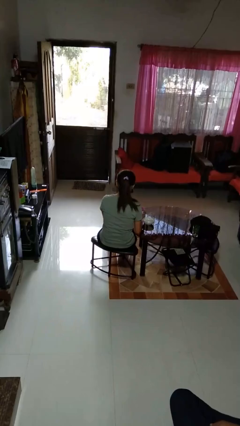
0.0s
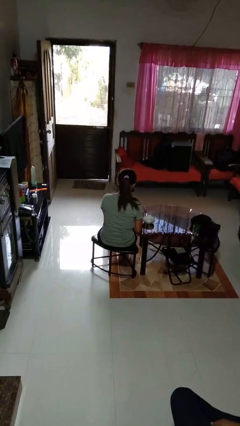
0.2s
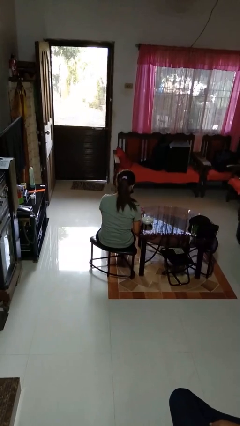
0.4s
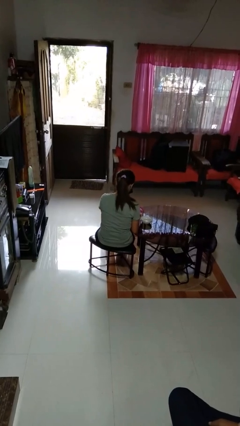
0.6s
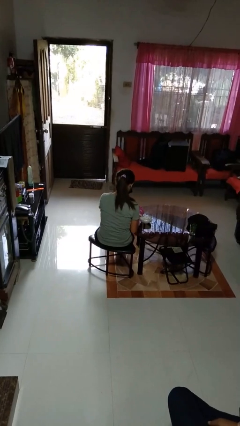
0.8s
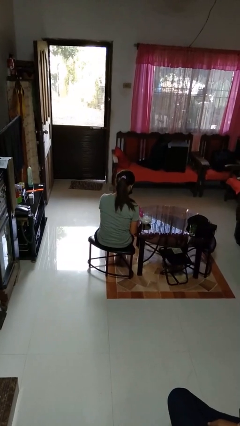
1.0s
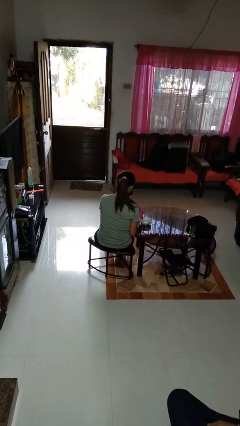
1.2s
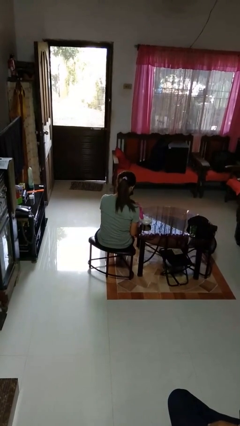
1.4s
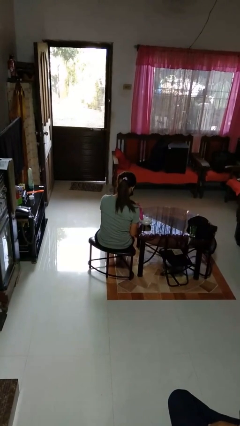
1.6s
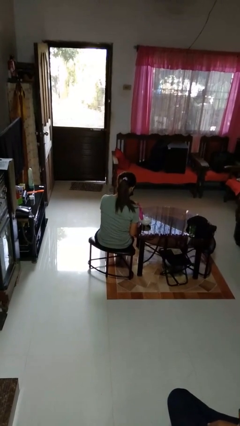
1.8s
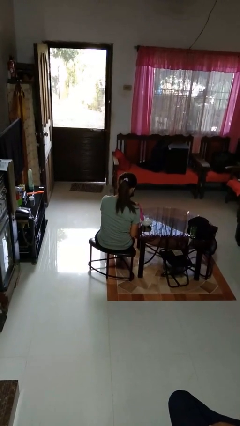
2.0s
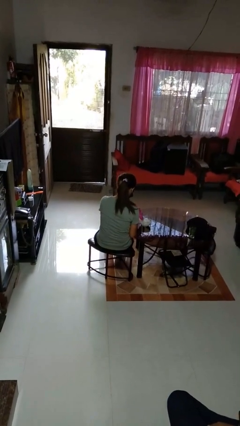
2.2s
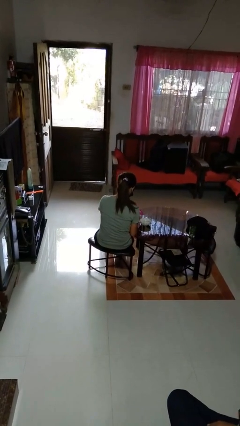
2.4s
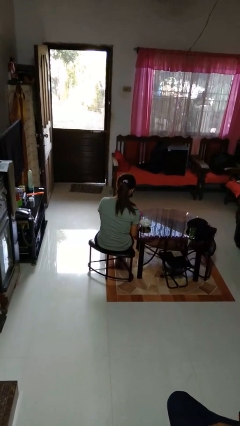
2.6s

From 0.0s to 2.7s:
person pours into bowl

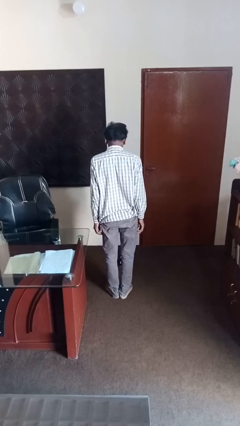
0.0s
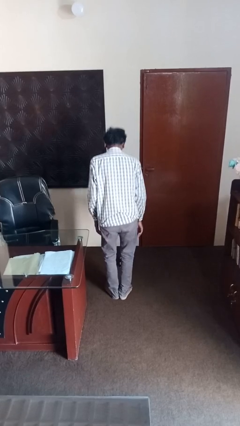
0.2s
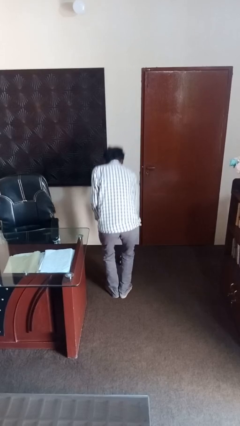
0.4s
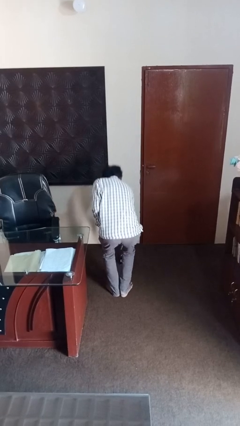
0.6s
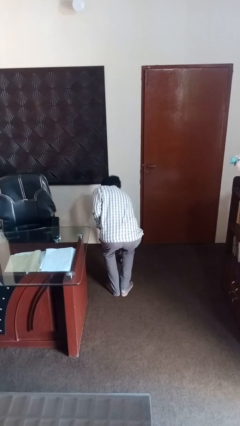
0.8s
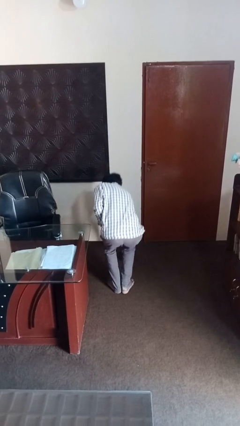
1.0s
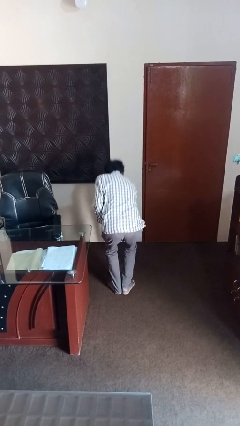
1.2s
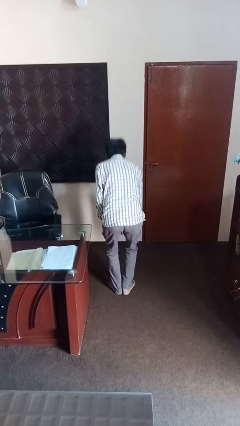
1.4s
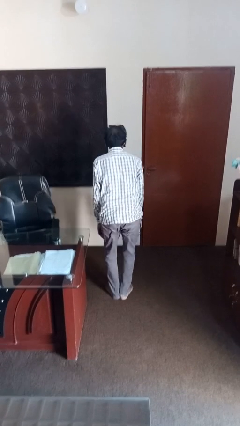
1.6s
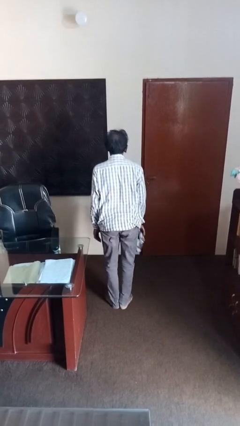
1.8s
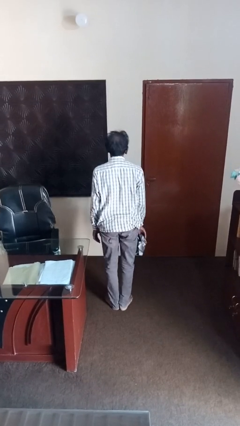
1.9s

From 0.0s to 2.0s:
person picks up object from floor

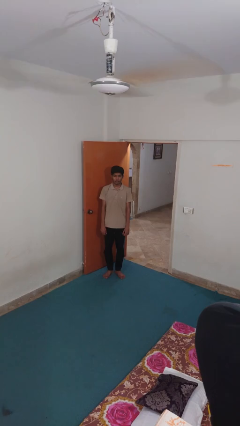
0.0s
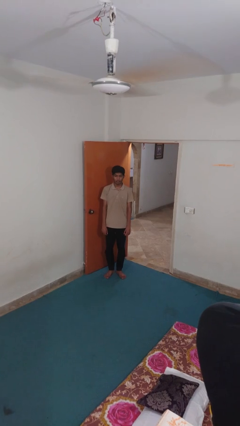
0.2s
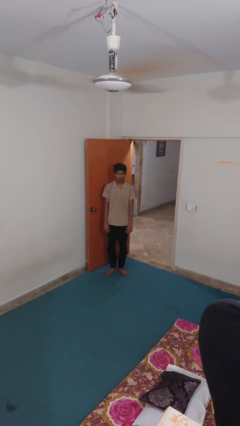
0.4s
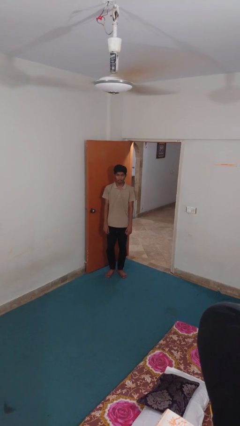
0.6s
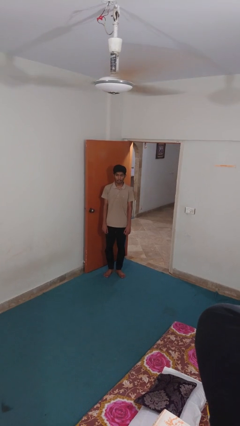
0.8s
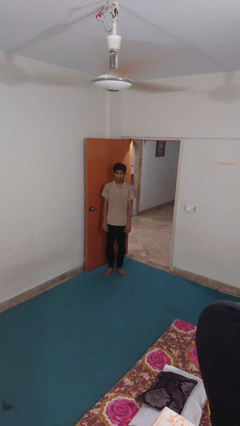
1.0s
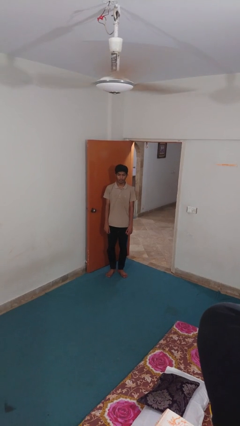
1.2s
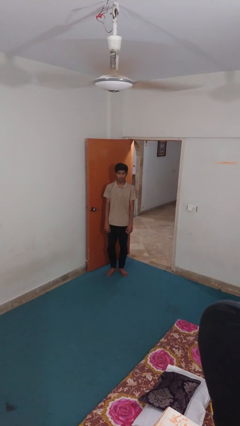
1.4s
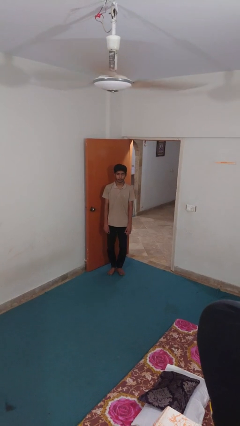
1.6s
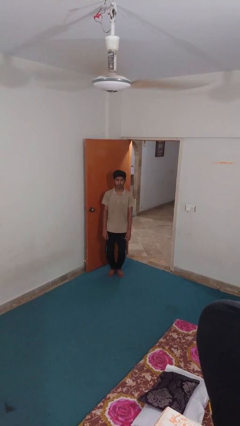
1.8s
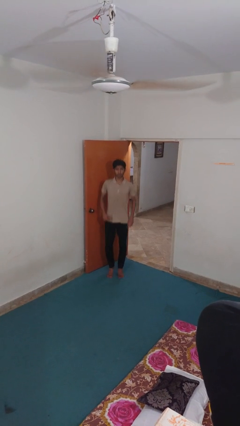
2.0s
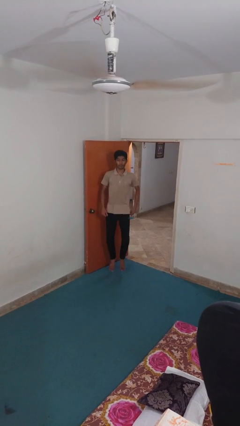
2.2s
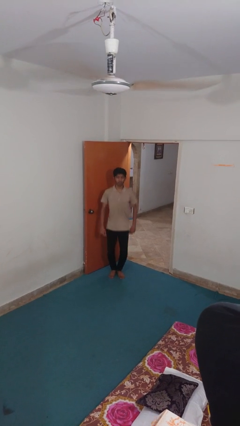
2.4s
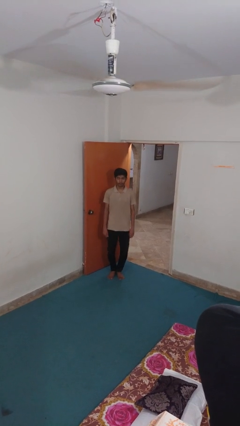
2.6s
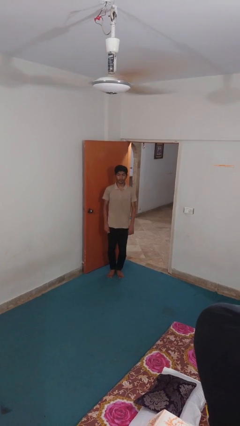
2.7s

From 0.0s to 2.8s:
person jumps

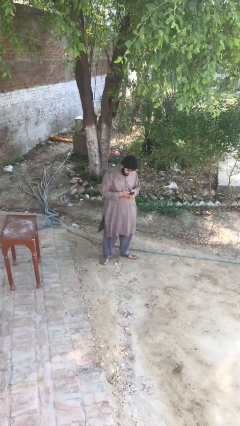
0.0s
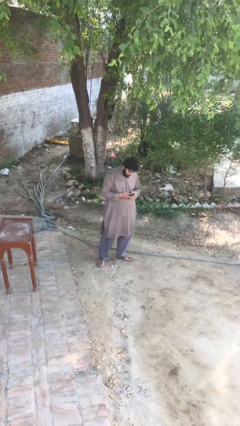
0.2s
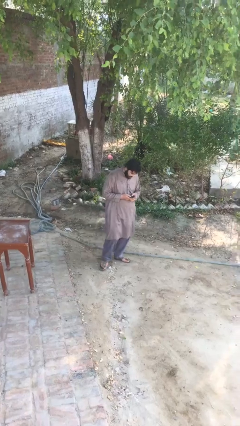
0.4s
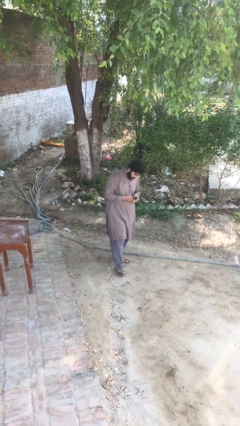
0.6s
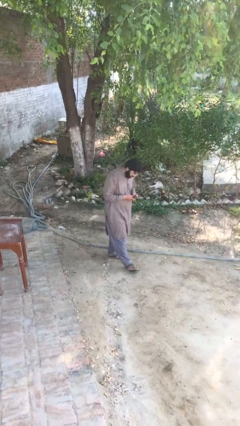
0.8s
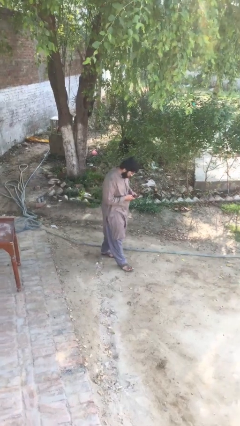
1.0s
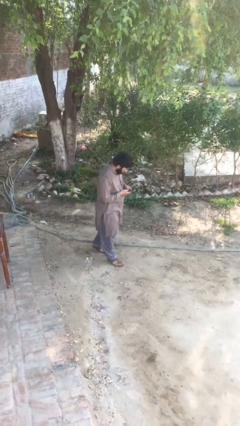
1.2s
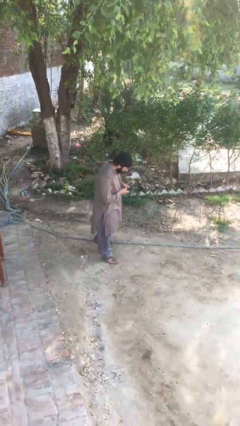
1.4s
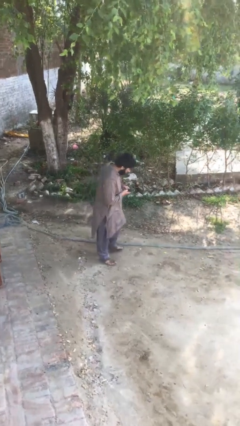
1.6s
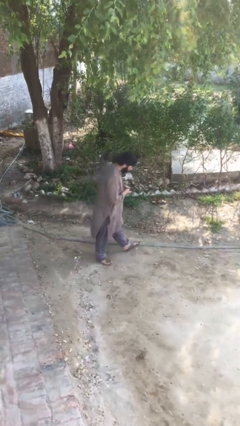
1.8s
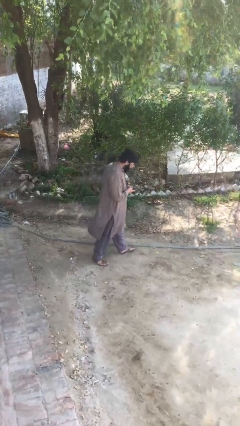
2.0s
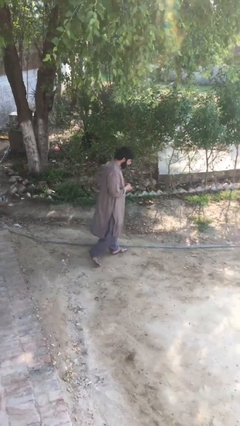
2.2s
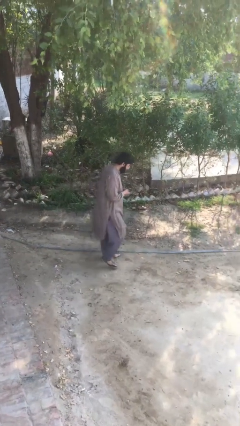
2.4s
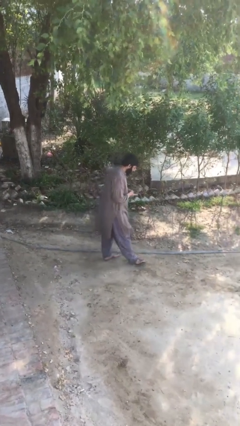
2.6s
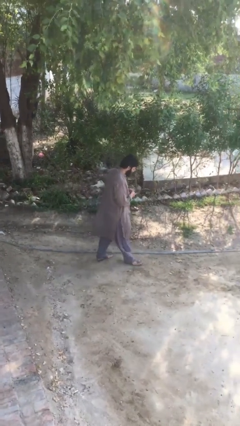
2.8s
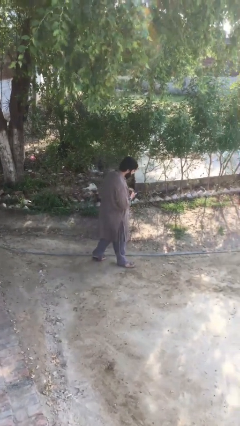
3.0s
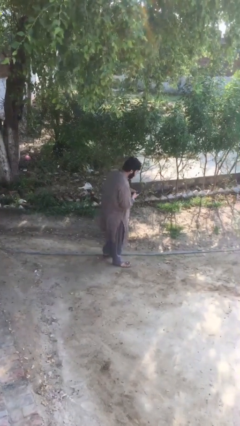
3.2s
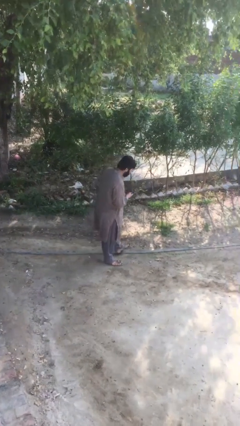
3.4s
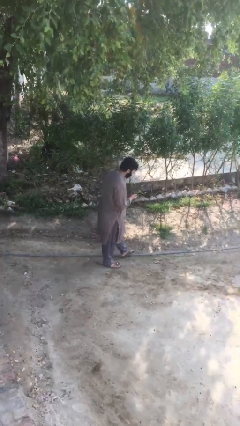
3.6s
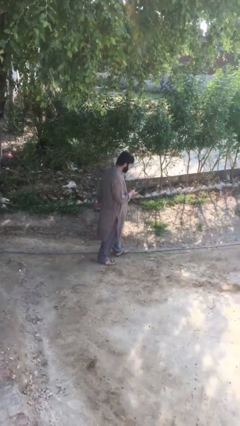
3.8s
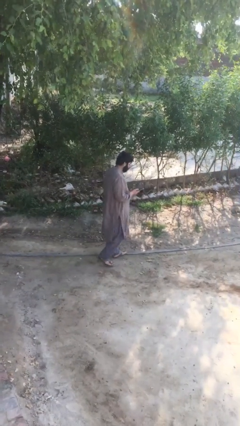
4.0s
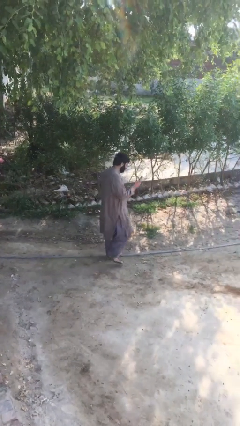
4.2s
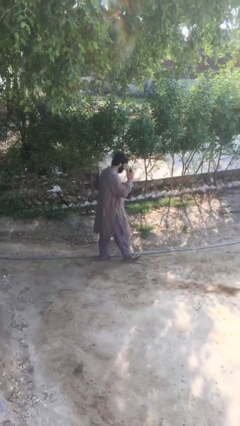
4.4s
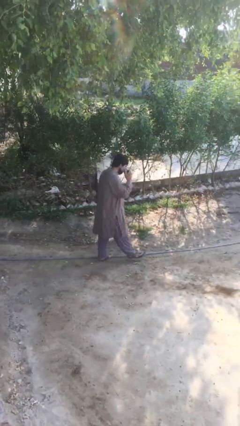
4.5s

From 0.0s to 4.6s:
person texts on phone

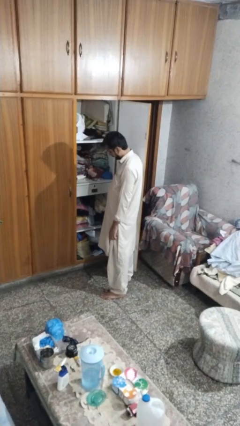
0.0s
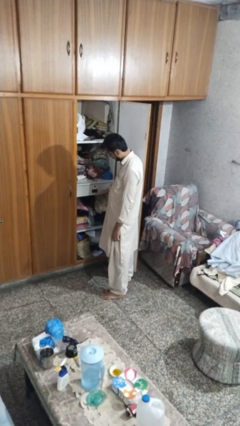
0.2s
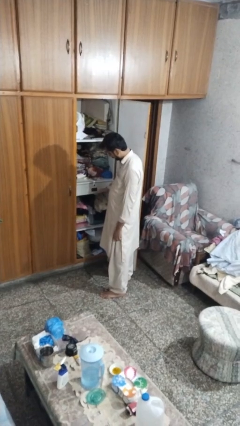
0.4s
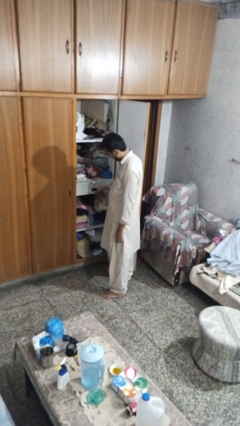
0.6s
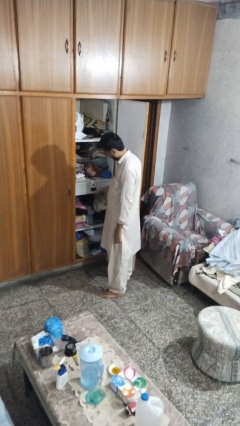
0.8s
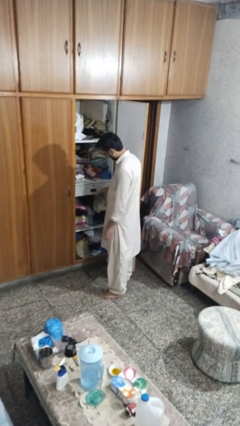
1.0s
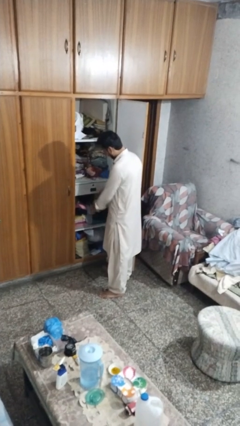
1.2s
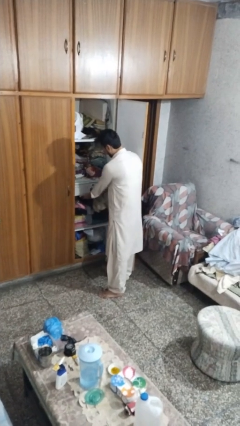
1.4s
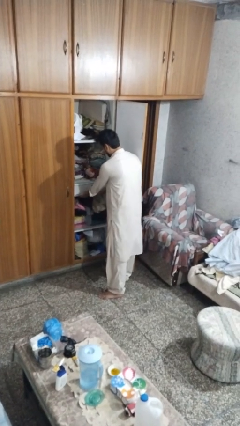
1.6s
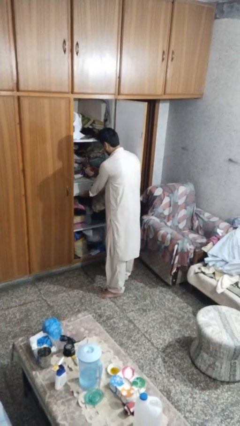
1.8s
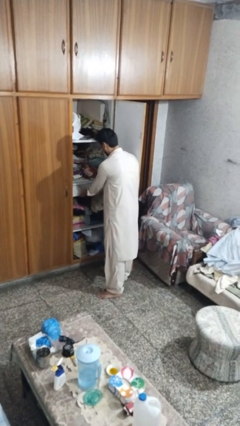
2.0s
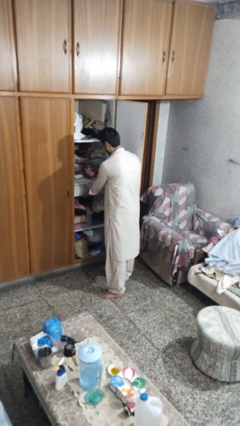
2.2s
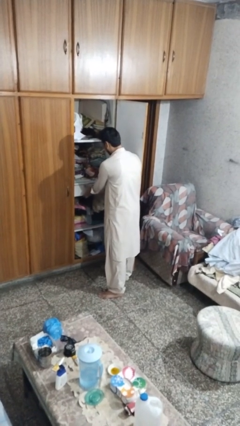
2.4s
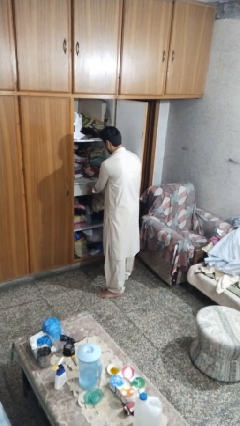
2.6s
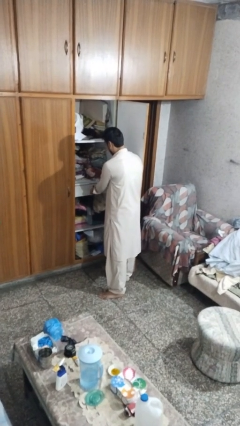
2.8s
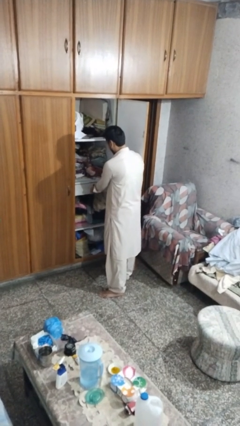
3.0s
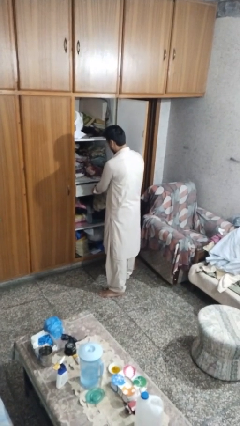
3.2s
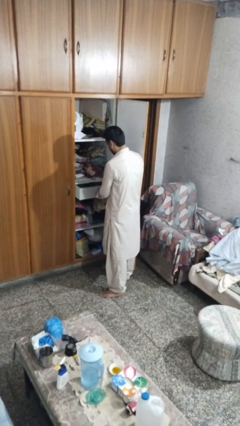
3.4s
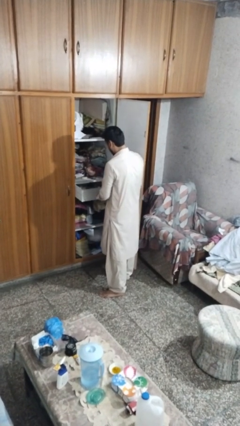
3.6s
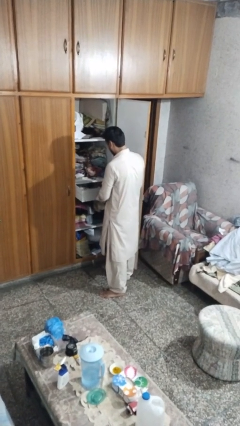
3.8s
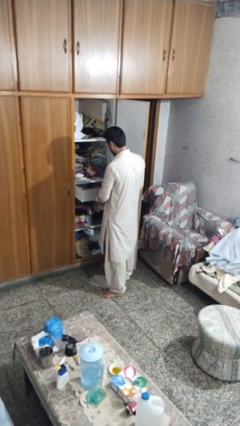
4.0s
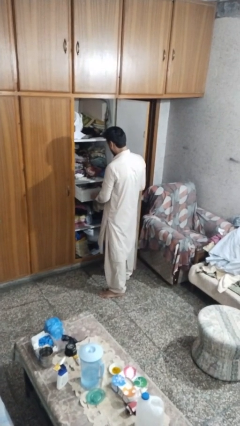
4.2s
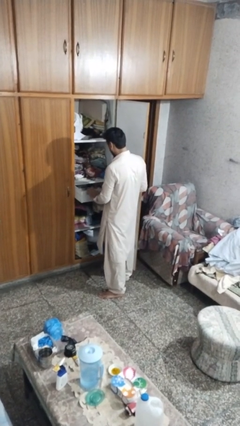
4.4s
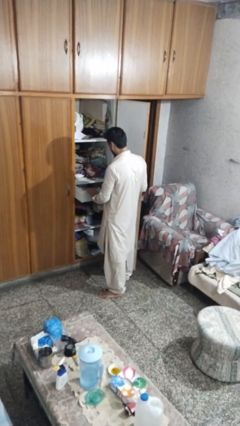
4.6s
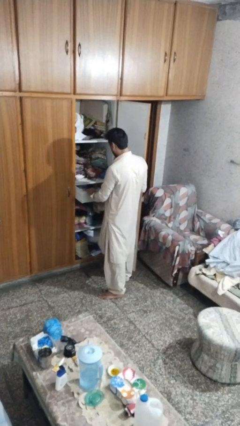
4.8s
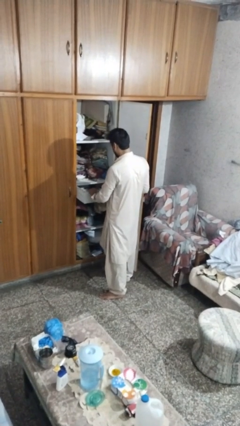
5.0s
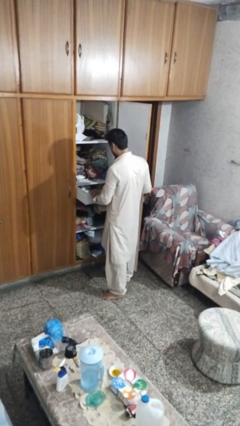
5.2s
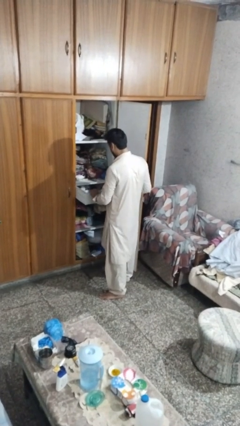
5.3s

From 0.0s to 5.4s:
person opens dresser drawer

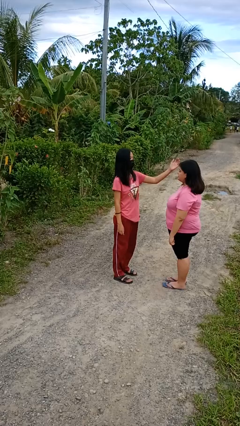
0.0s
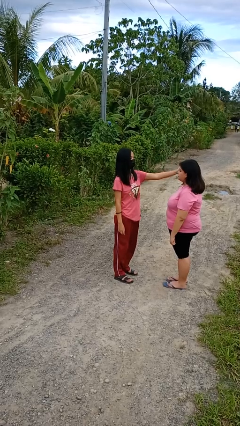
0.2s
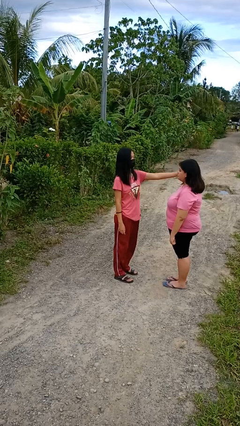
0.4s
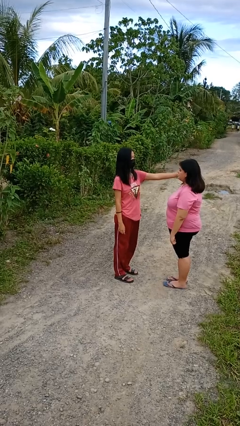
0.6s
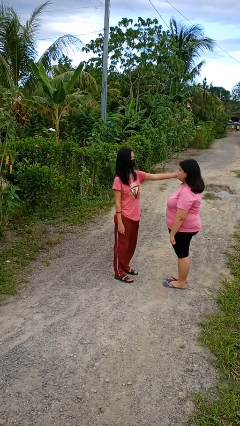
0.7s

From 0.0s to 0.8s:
person touches face of person
